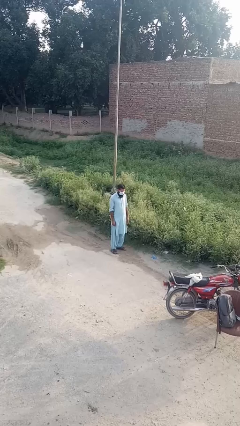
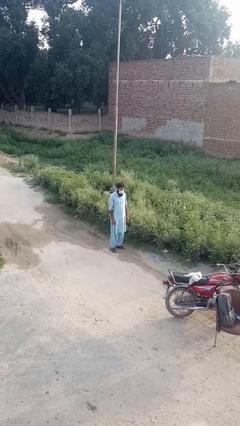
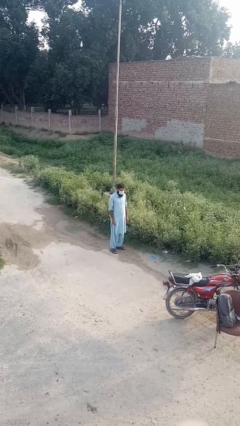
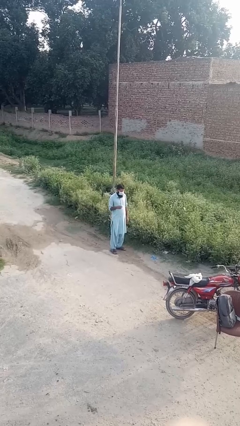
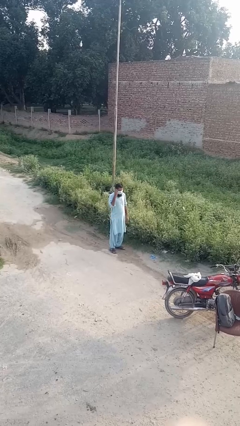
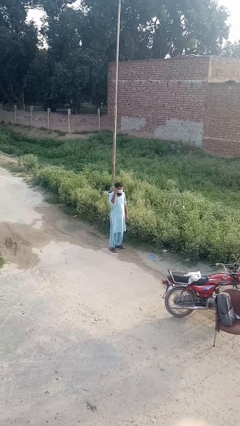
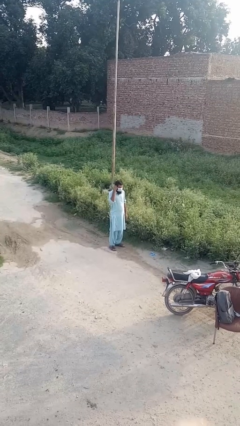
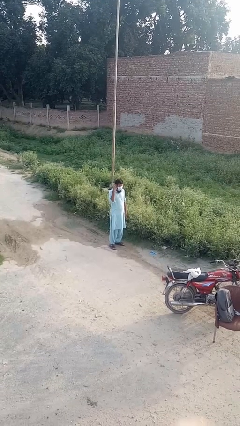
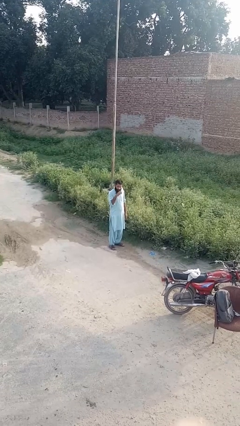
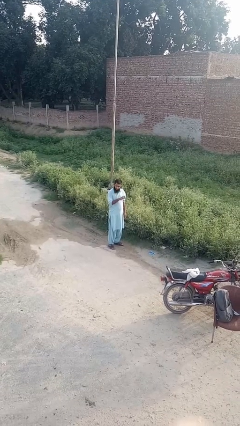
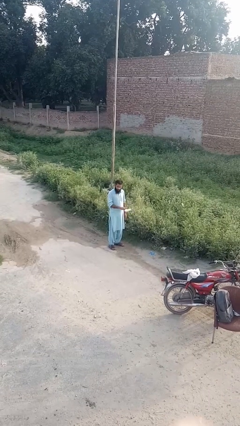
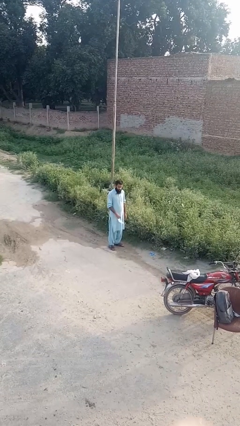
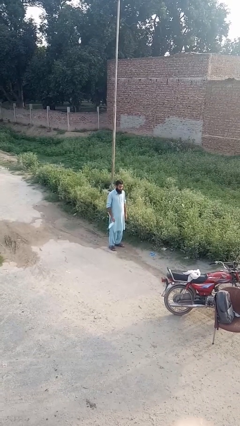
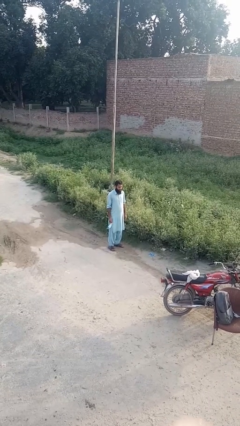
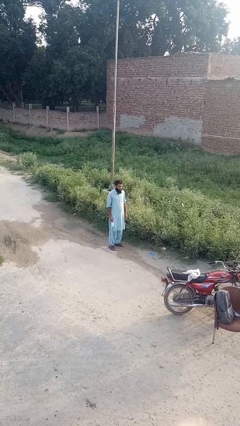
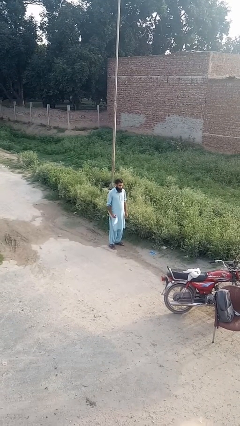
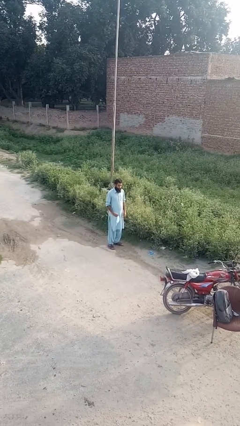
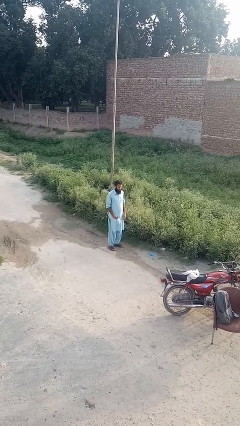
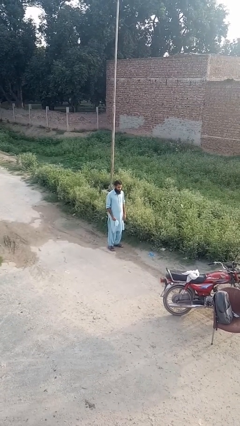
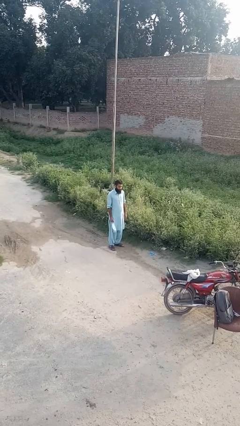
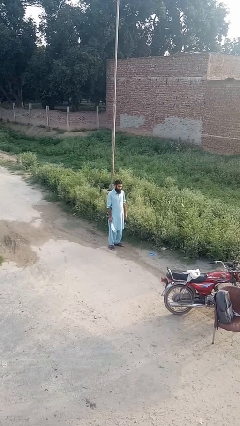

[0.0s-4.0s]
person takes off facemask

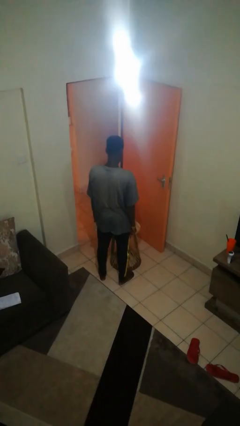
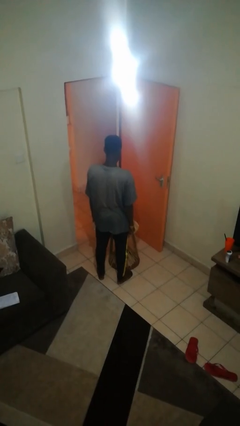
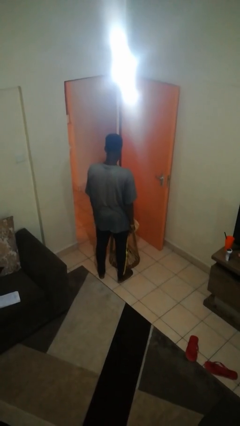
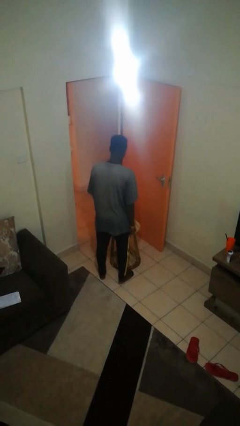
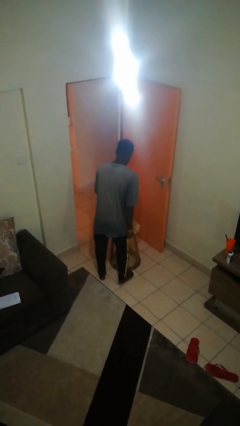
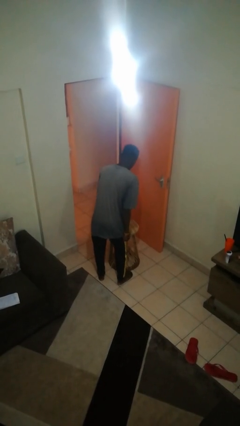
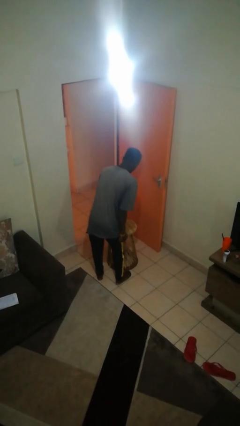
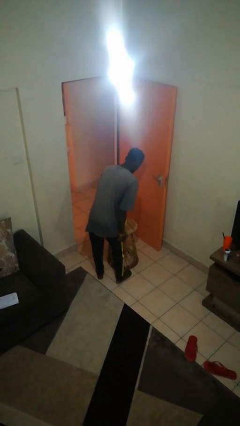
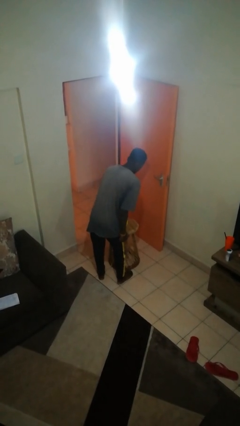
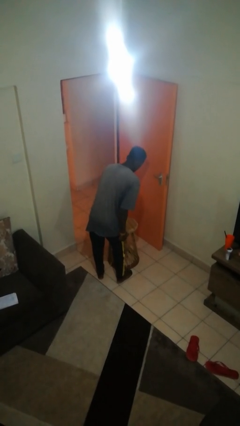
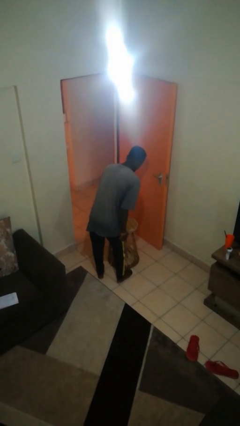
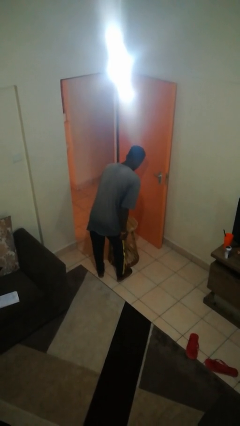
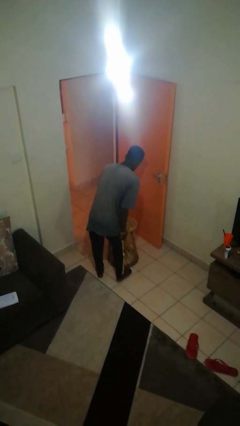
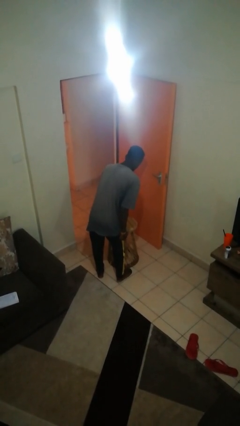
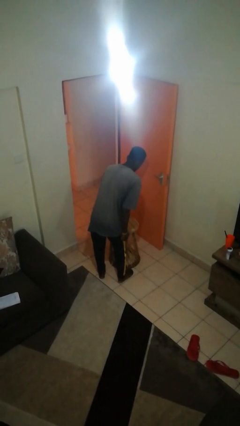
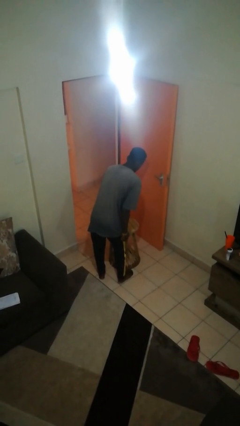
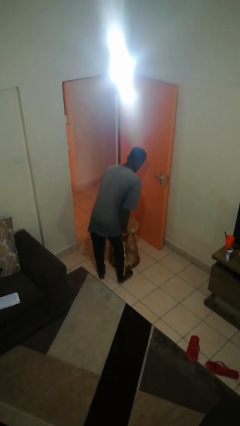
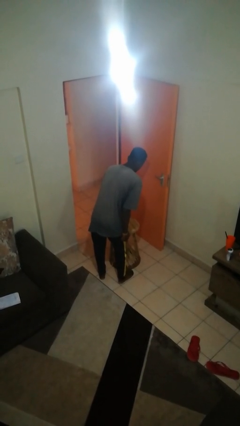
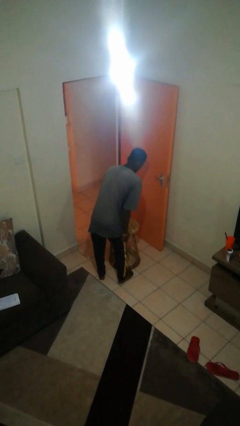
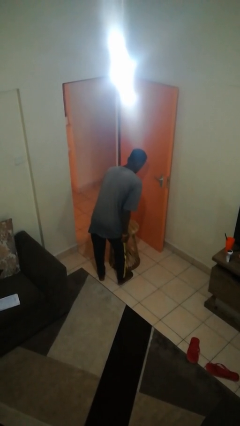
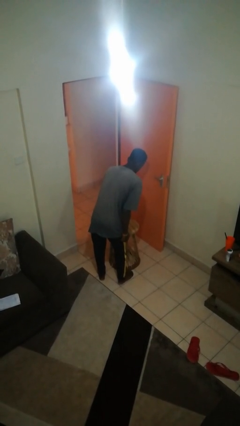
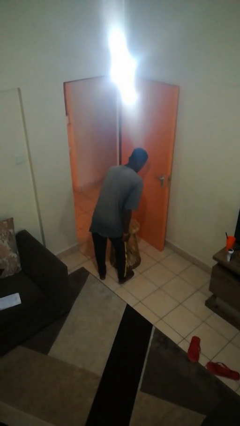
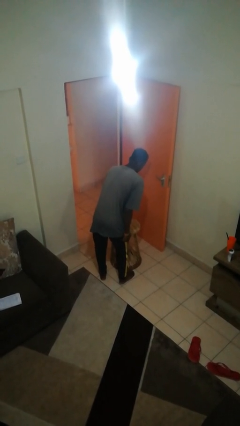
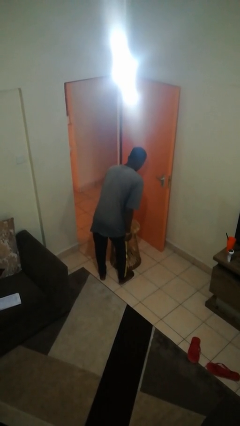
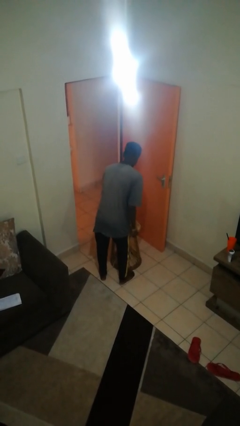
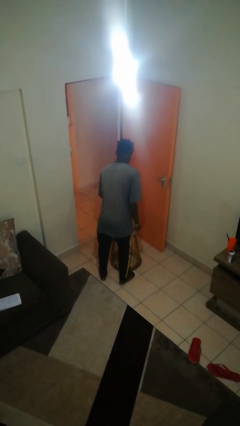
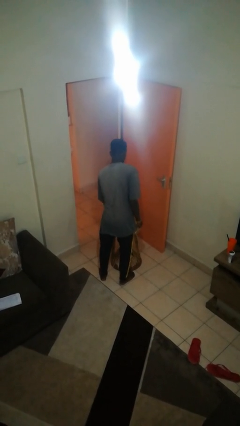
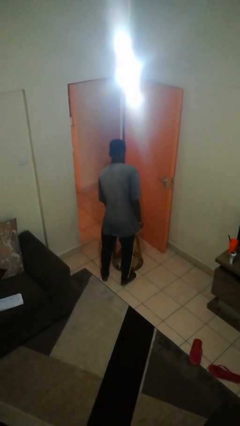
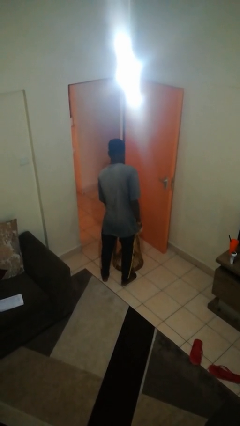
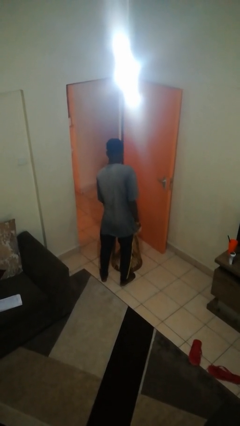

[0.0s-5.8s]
person pours liquid into cup

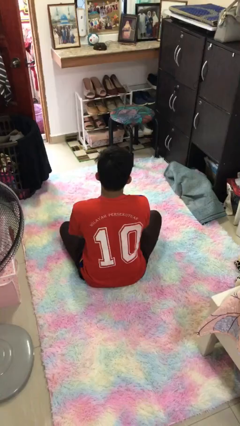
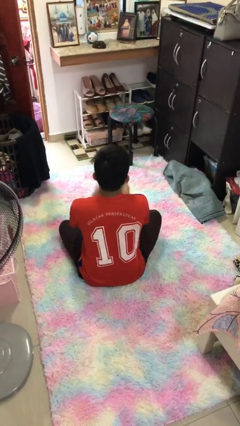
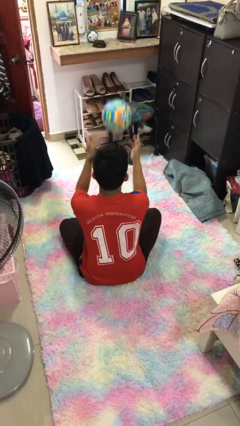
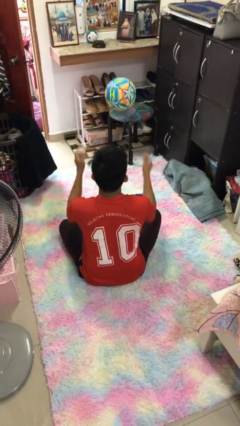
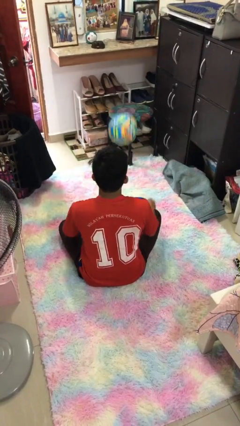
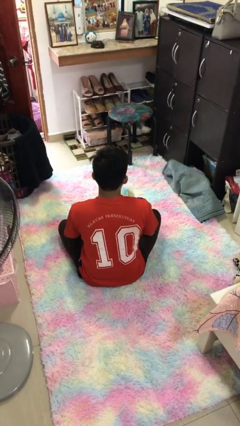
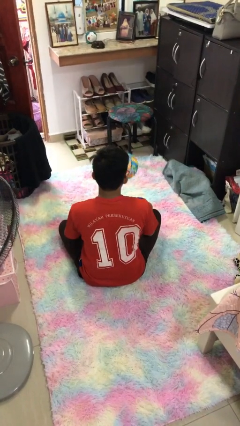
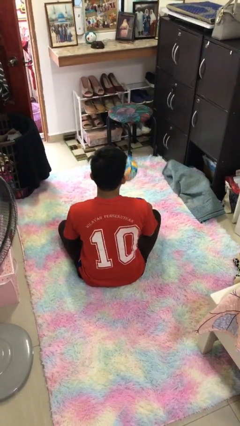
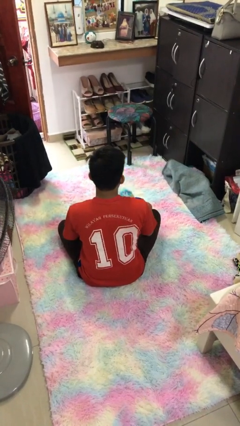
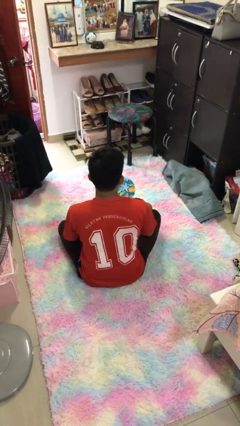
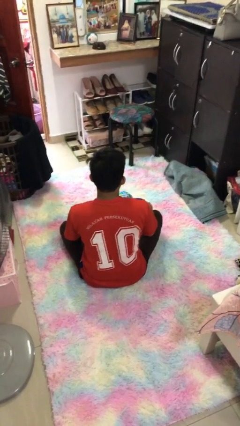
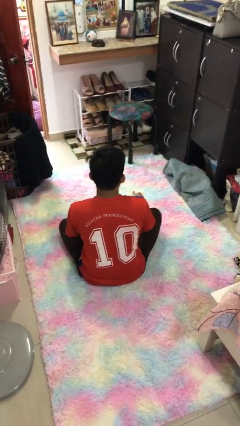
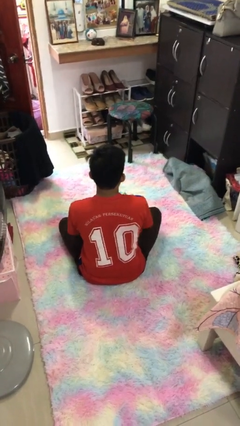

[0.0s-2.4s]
person bounces ball on floor

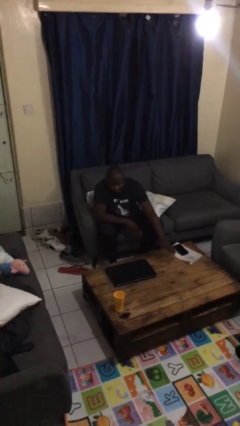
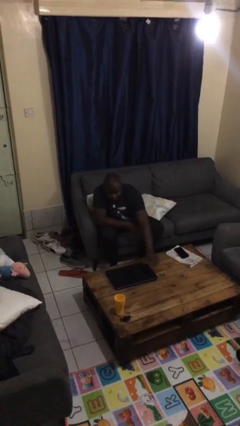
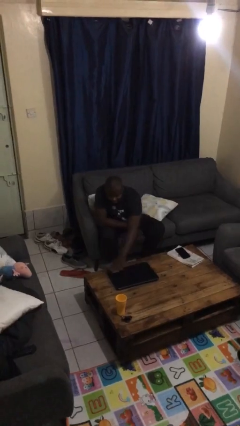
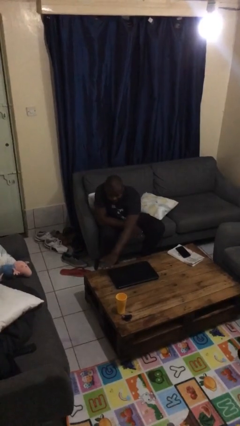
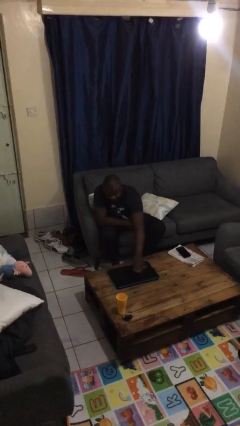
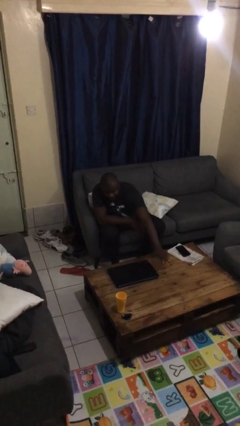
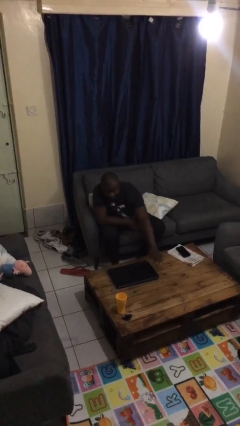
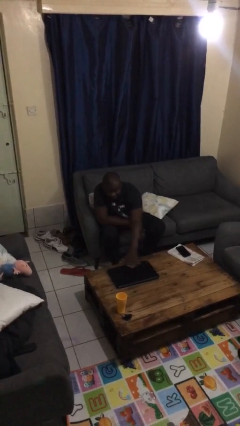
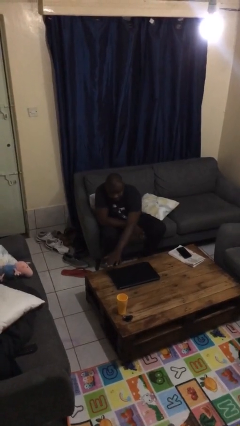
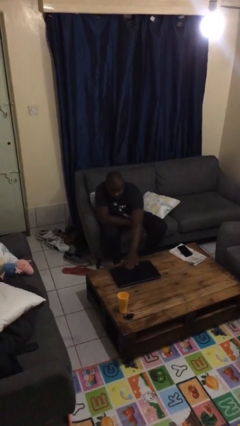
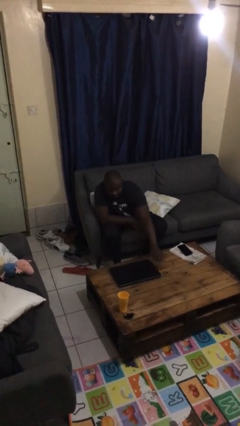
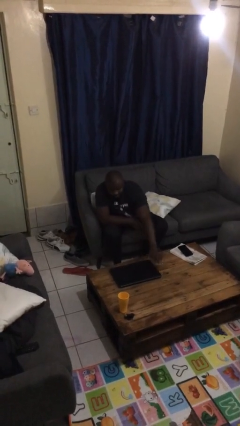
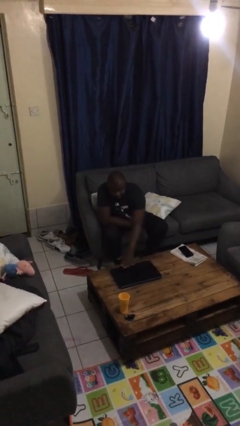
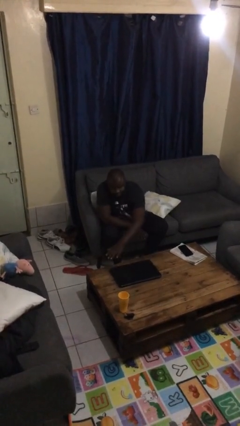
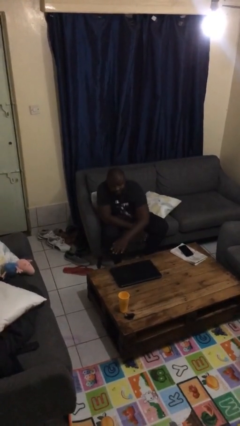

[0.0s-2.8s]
person waves hand over object

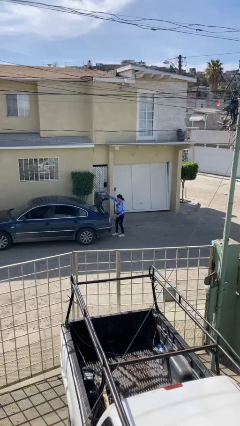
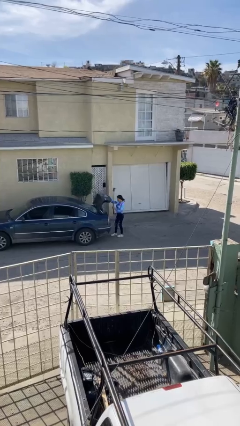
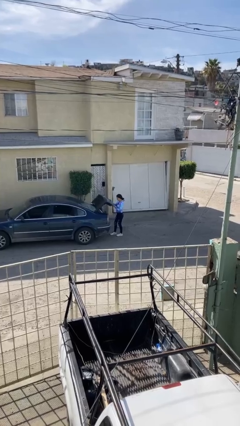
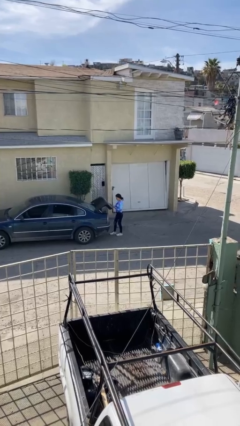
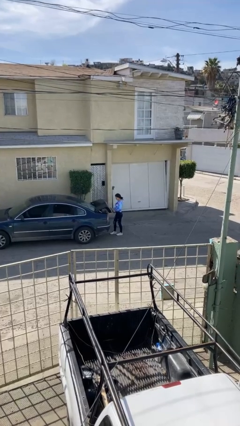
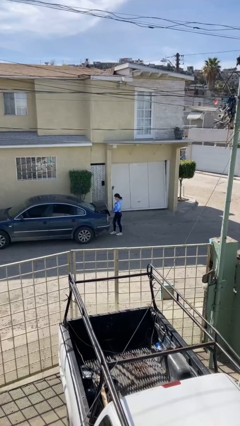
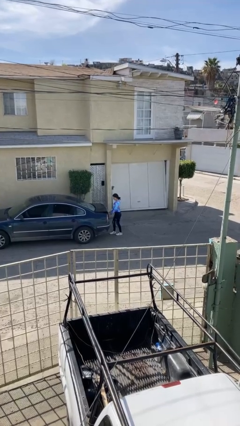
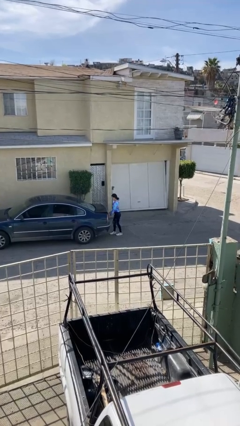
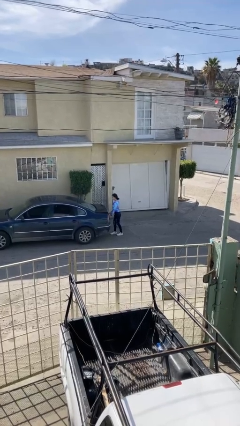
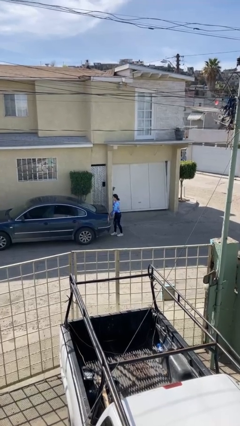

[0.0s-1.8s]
person closes car trunk

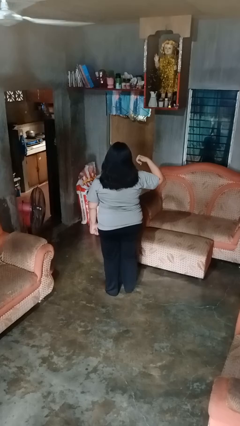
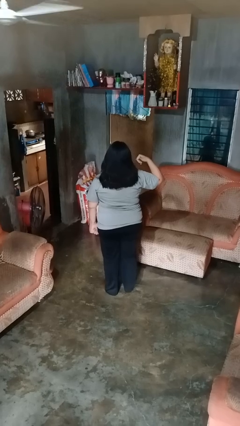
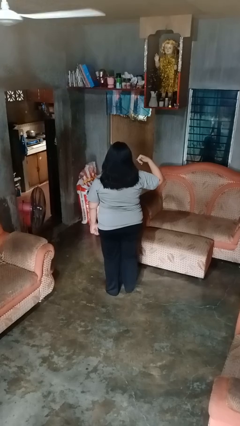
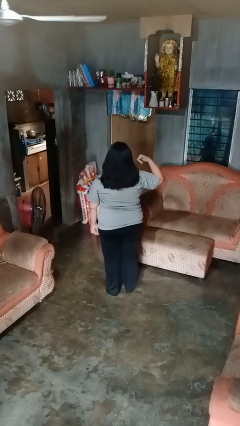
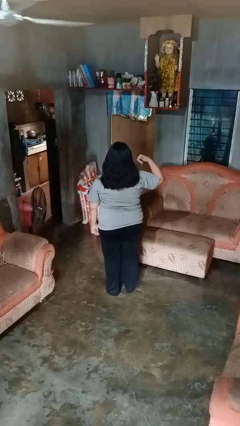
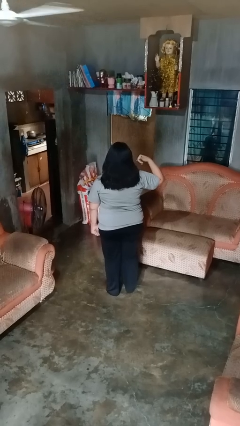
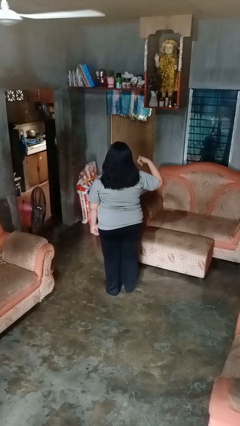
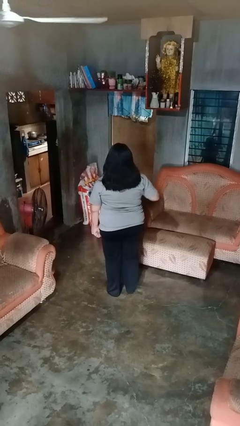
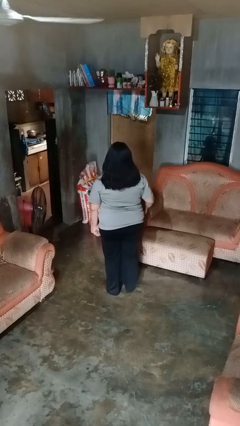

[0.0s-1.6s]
person gestures call me
